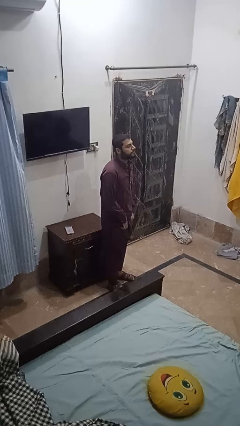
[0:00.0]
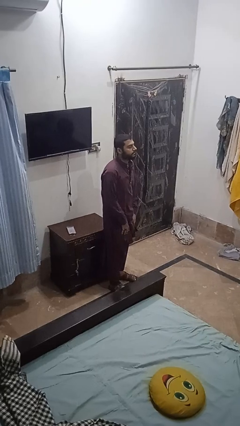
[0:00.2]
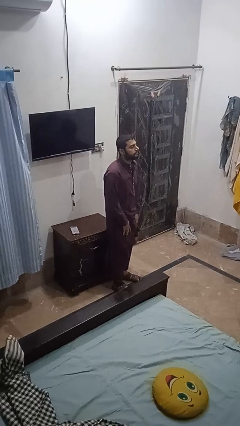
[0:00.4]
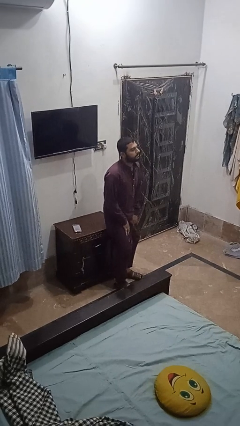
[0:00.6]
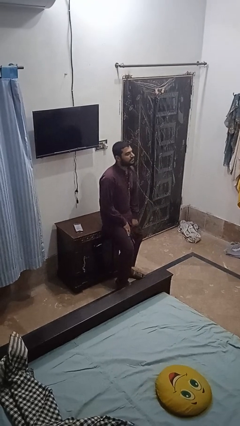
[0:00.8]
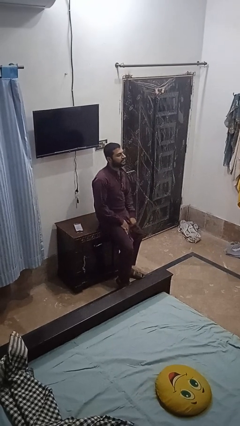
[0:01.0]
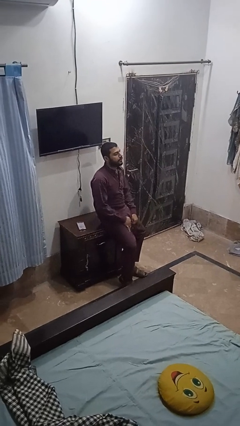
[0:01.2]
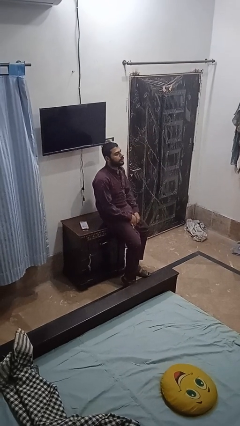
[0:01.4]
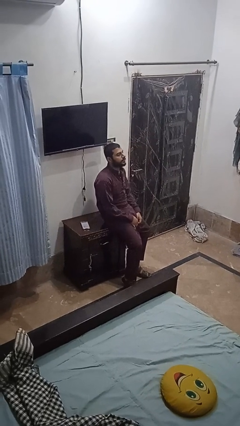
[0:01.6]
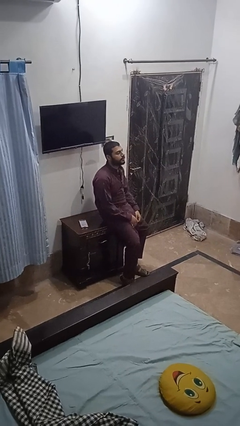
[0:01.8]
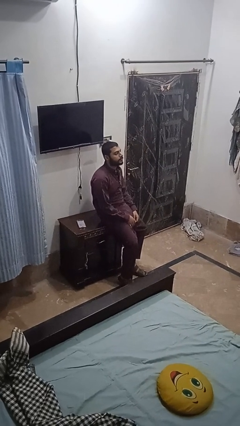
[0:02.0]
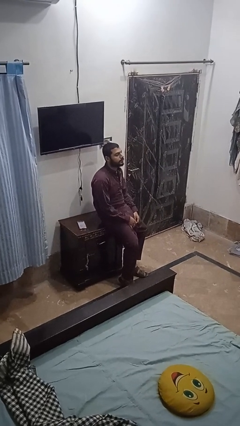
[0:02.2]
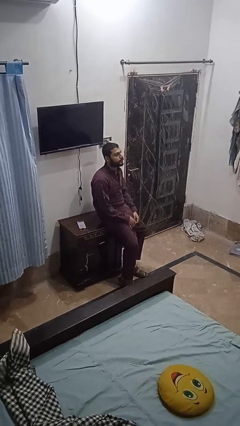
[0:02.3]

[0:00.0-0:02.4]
person sits down

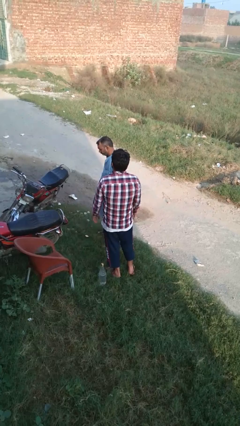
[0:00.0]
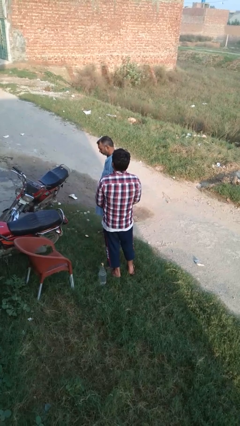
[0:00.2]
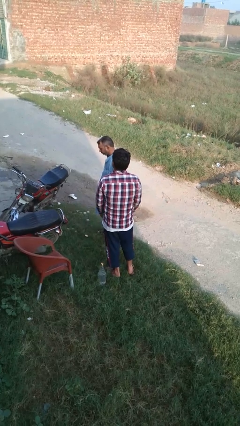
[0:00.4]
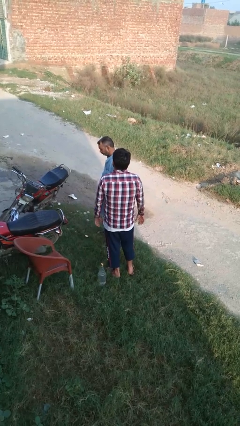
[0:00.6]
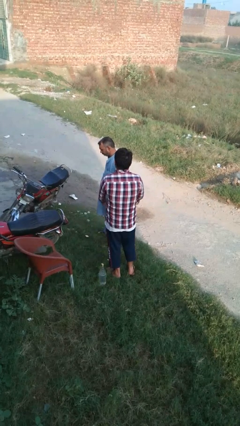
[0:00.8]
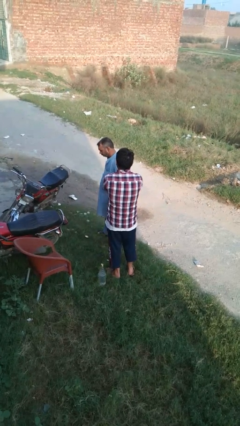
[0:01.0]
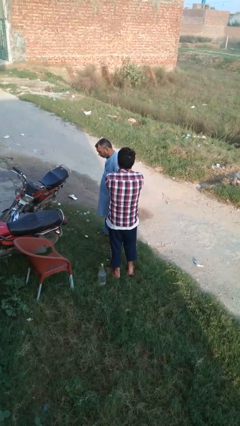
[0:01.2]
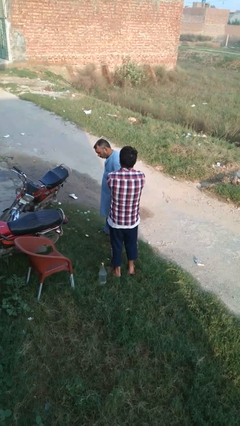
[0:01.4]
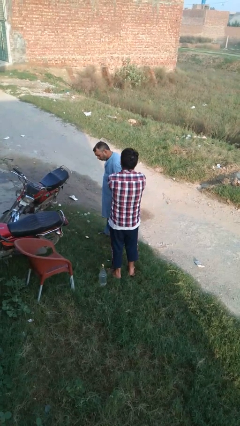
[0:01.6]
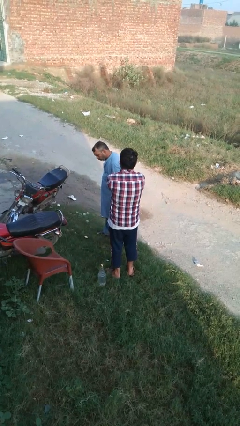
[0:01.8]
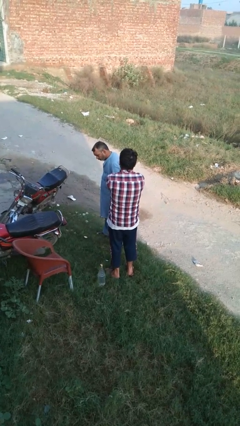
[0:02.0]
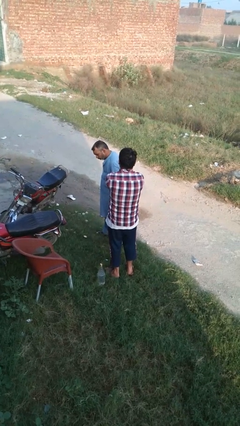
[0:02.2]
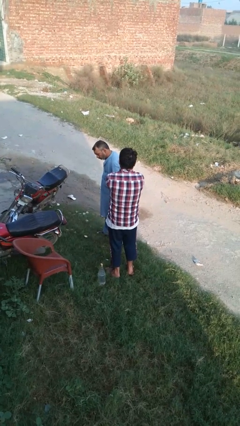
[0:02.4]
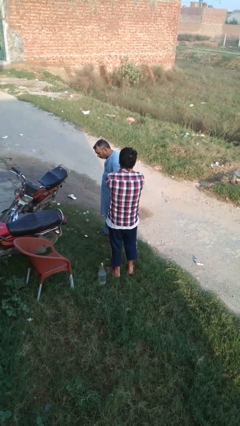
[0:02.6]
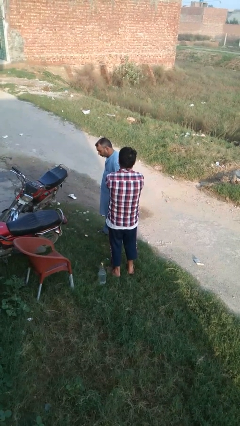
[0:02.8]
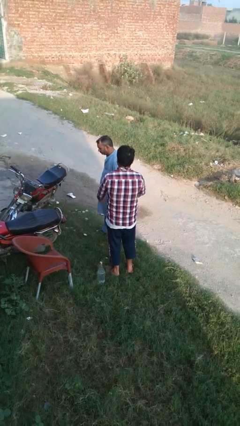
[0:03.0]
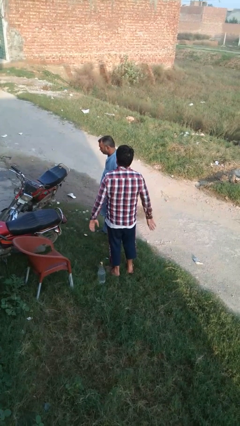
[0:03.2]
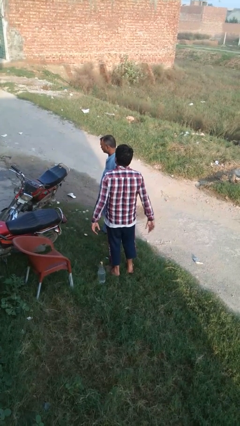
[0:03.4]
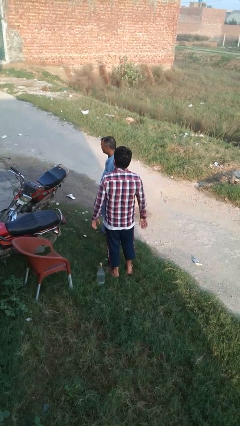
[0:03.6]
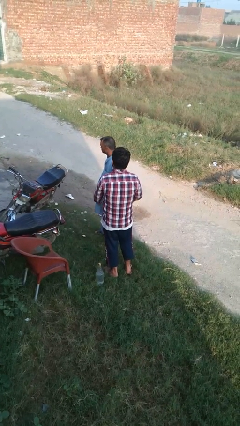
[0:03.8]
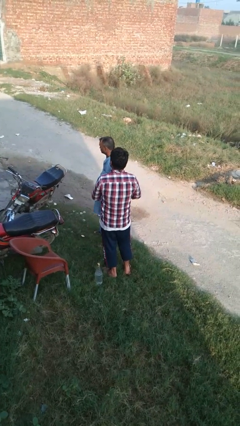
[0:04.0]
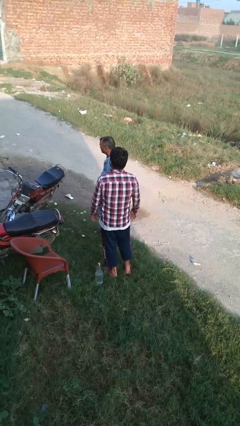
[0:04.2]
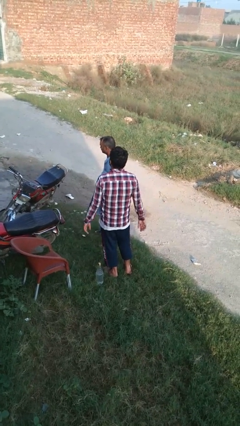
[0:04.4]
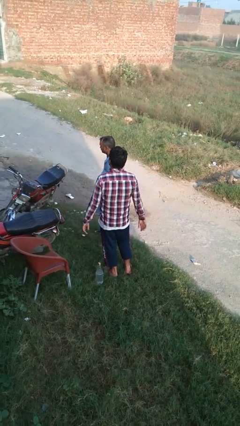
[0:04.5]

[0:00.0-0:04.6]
person grabs person by forearm

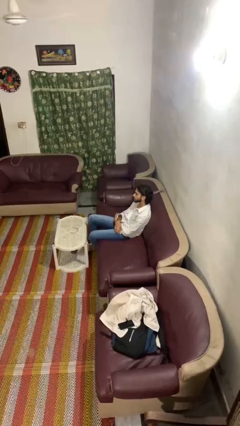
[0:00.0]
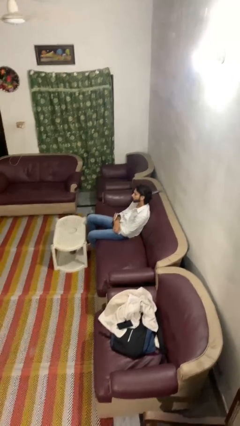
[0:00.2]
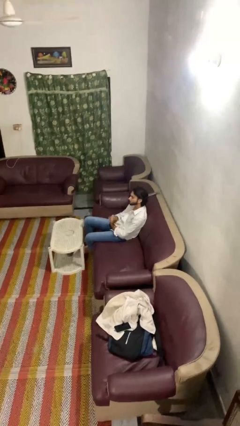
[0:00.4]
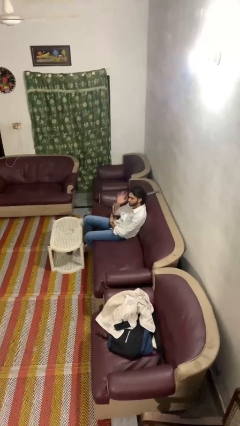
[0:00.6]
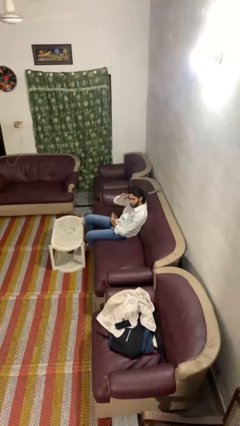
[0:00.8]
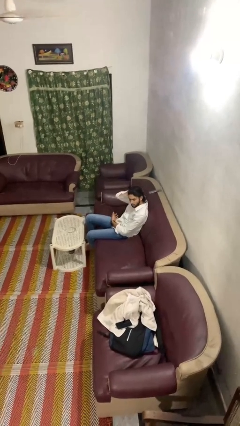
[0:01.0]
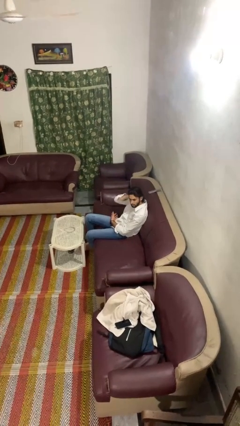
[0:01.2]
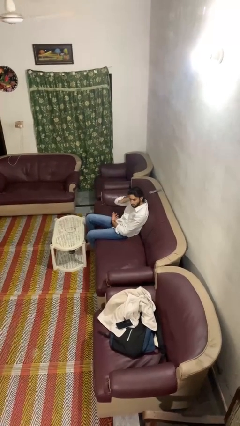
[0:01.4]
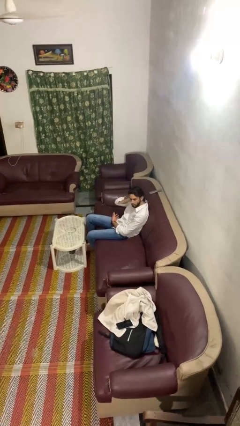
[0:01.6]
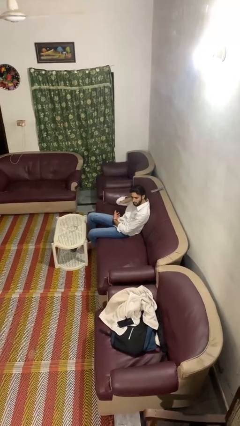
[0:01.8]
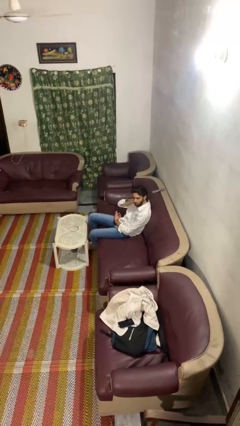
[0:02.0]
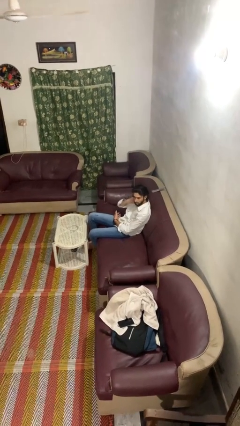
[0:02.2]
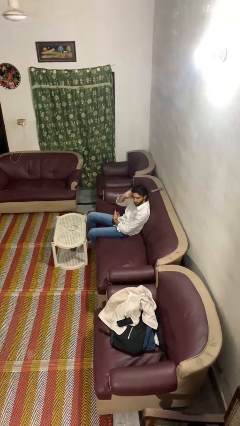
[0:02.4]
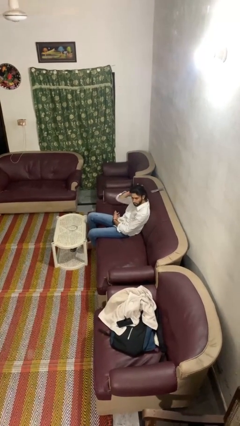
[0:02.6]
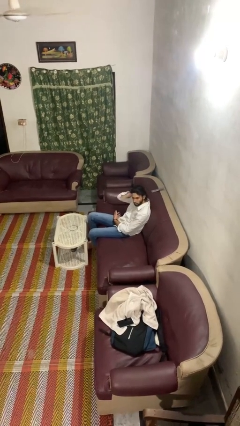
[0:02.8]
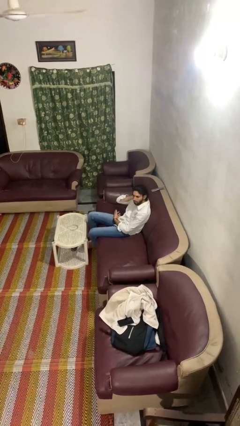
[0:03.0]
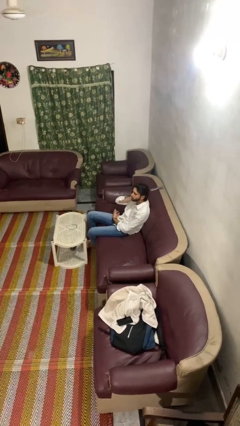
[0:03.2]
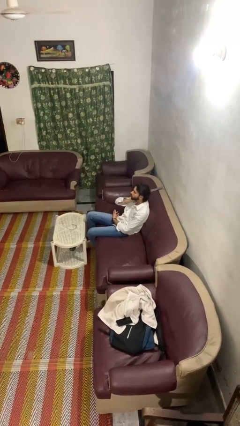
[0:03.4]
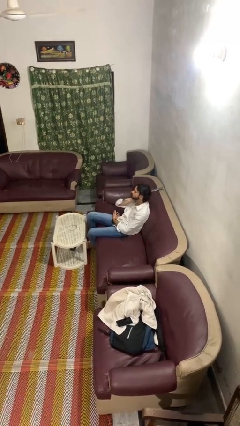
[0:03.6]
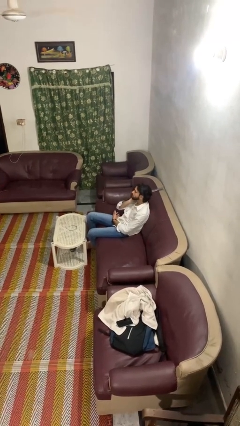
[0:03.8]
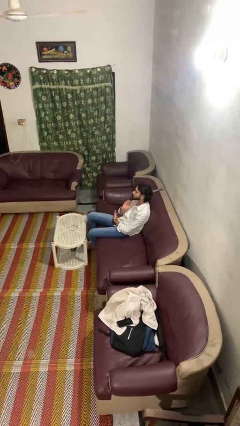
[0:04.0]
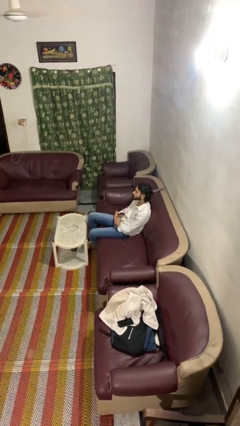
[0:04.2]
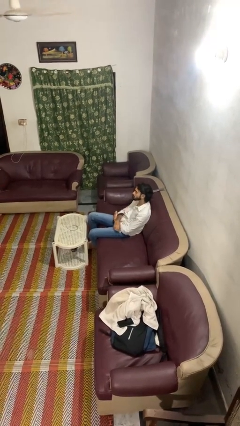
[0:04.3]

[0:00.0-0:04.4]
person strokes hair

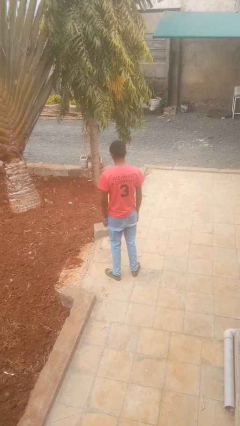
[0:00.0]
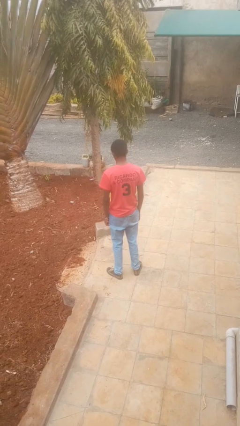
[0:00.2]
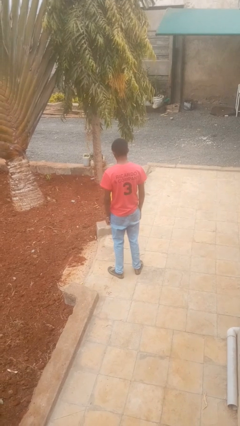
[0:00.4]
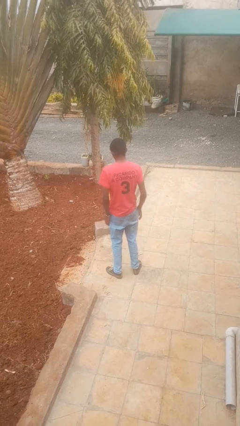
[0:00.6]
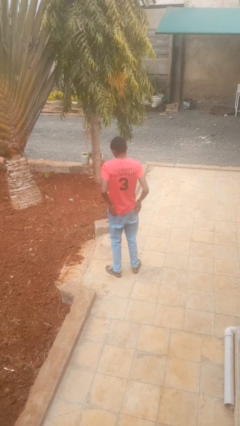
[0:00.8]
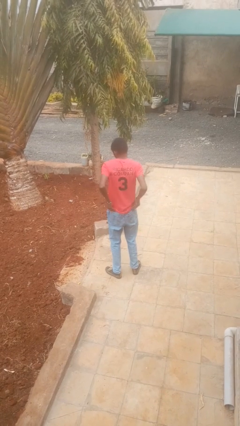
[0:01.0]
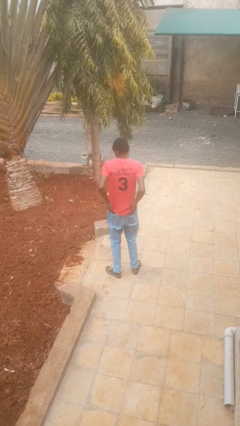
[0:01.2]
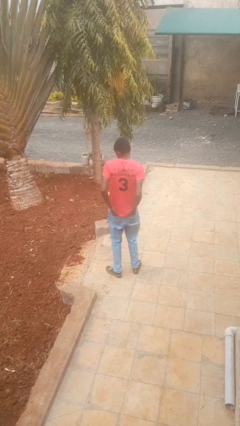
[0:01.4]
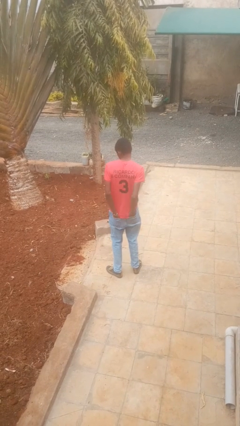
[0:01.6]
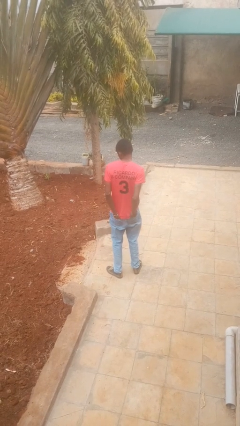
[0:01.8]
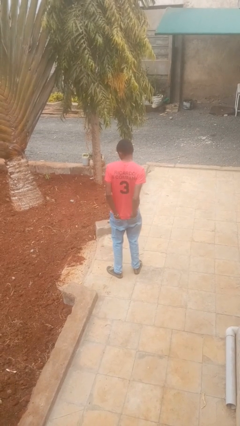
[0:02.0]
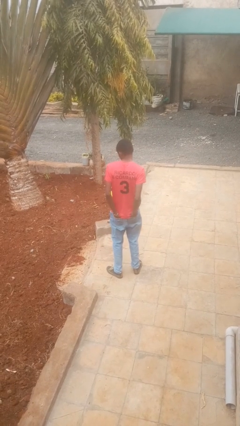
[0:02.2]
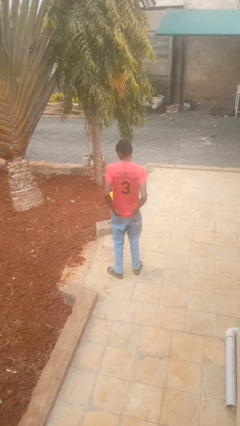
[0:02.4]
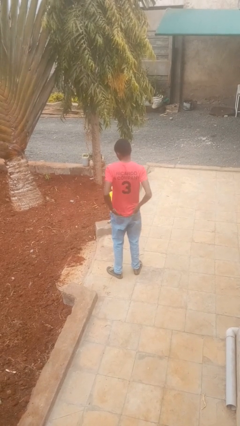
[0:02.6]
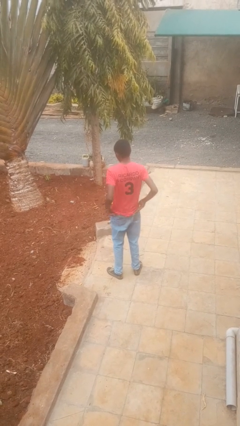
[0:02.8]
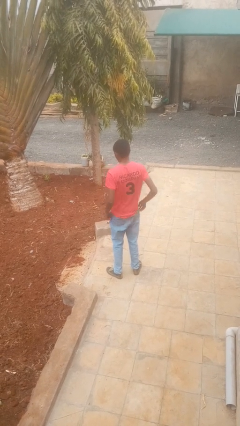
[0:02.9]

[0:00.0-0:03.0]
person puts hands in back pockets

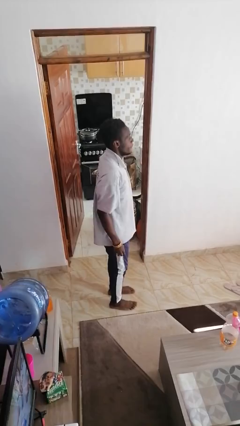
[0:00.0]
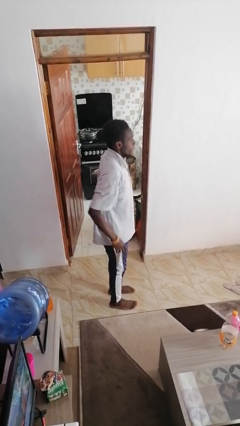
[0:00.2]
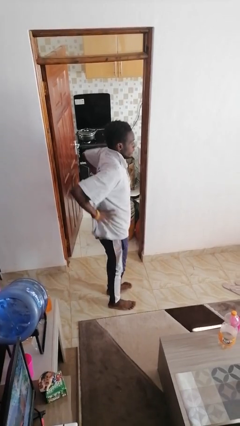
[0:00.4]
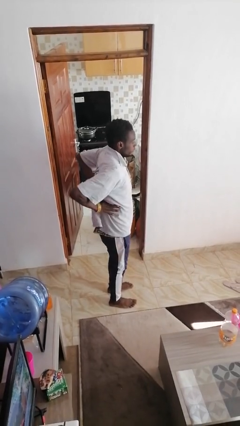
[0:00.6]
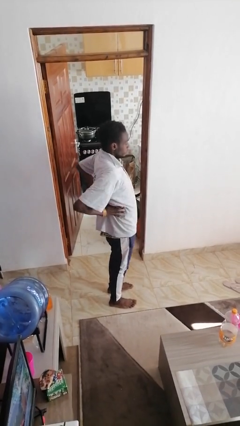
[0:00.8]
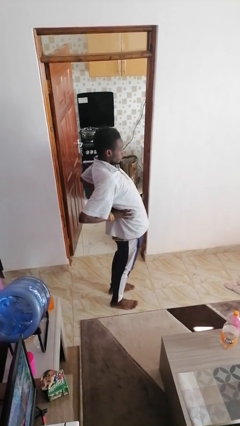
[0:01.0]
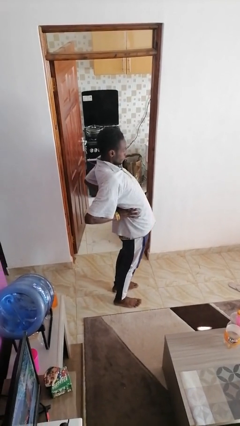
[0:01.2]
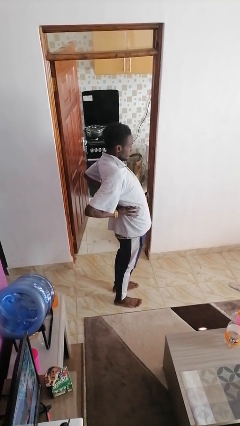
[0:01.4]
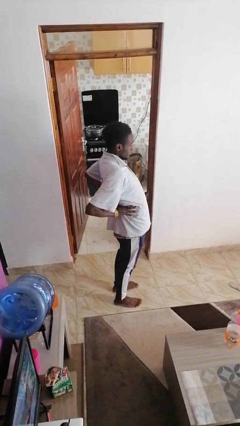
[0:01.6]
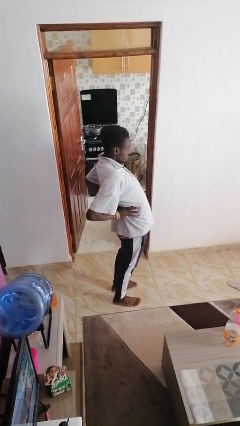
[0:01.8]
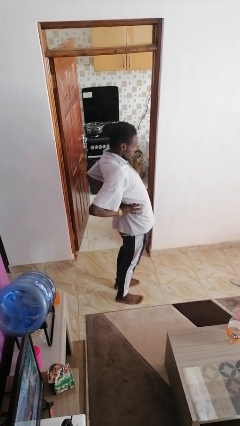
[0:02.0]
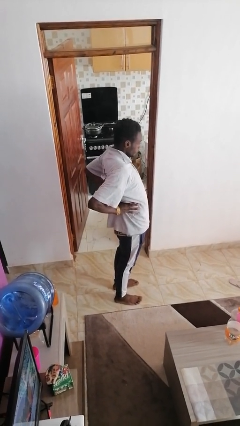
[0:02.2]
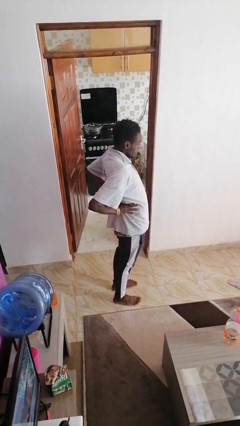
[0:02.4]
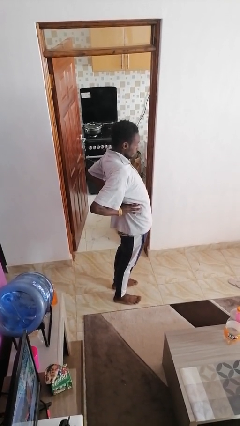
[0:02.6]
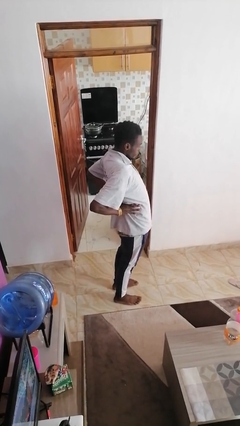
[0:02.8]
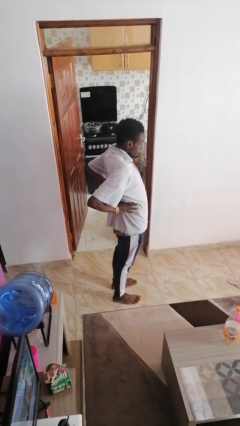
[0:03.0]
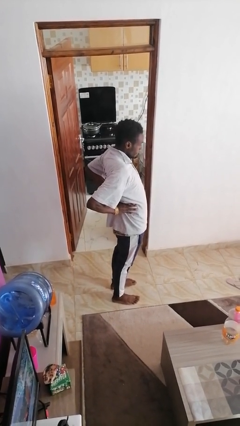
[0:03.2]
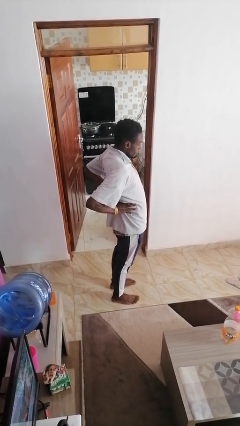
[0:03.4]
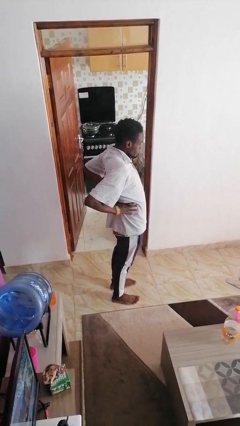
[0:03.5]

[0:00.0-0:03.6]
person stretches back
